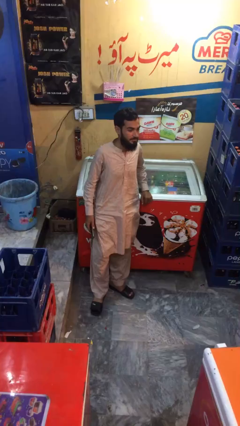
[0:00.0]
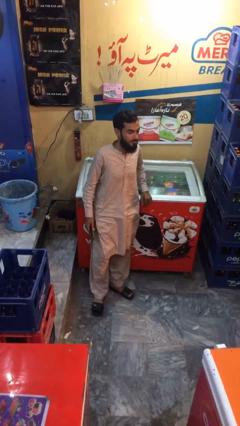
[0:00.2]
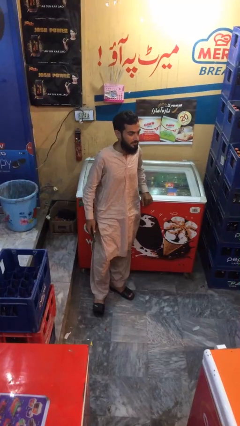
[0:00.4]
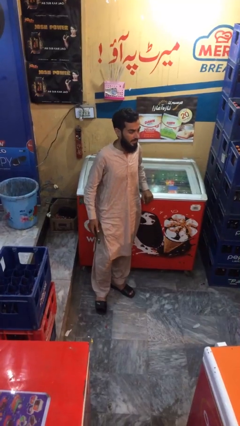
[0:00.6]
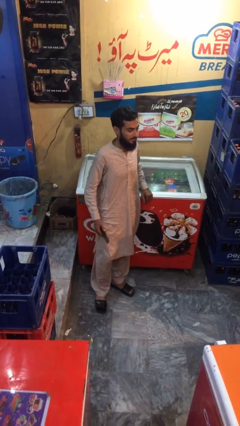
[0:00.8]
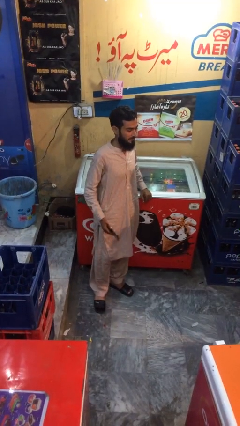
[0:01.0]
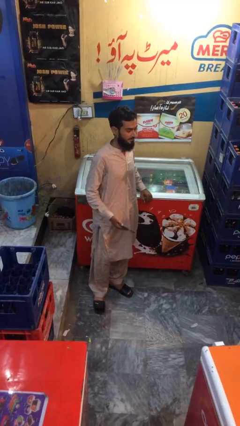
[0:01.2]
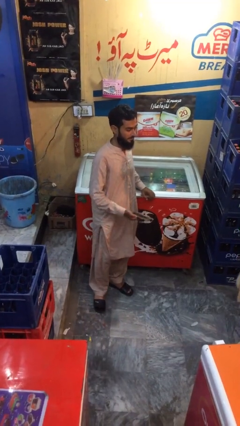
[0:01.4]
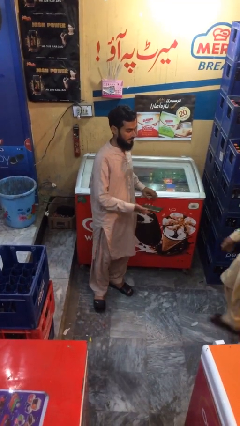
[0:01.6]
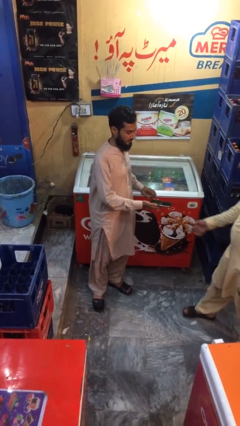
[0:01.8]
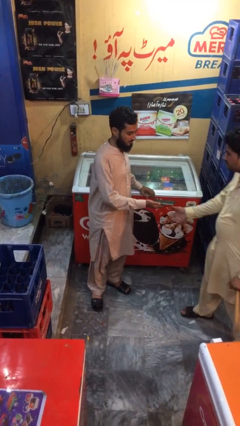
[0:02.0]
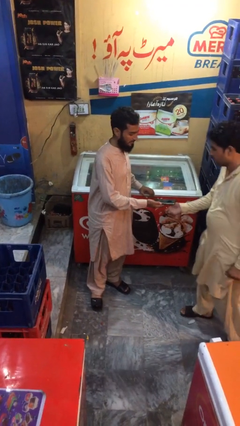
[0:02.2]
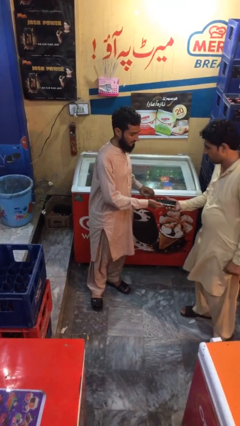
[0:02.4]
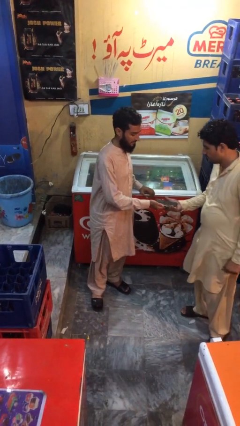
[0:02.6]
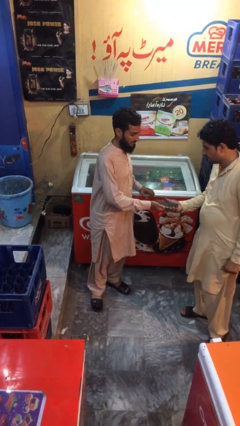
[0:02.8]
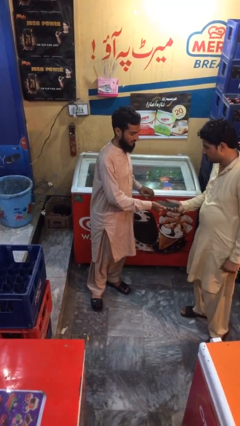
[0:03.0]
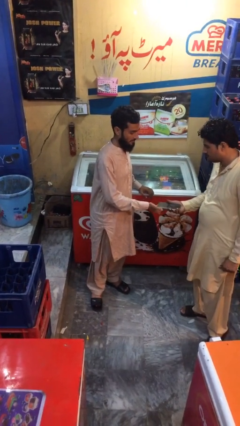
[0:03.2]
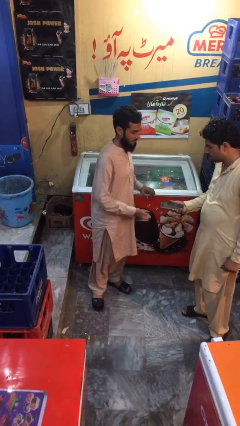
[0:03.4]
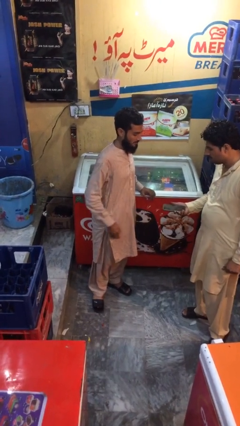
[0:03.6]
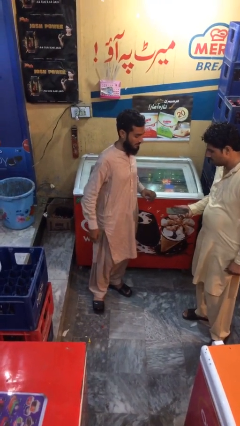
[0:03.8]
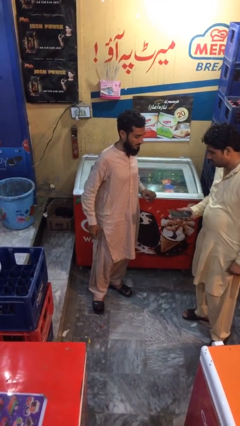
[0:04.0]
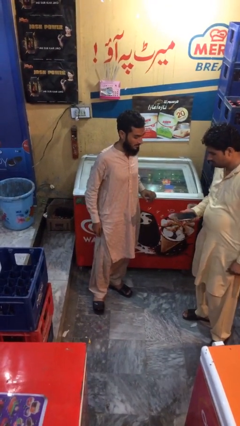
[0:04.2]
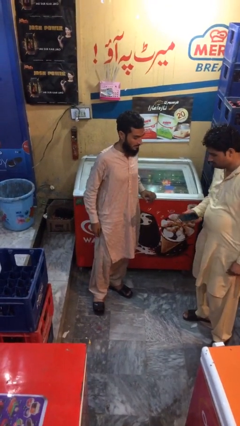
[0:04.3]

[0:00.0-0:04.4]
person transfers object to person

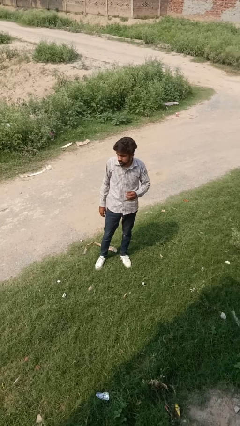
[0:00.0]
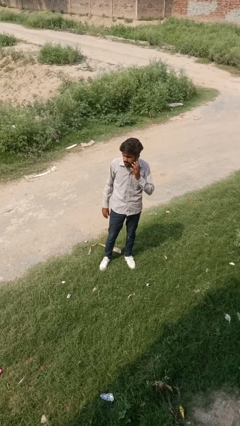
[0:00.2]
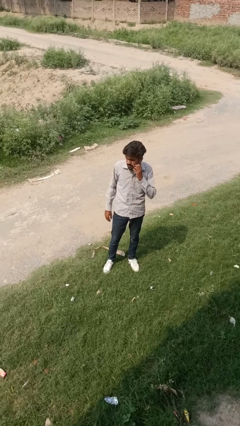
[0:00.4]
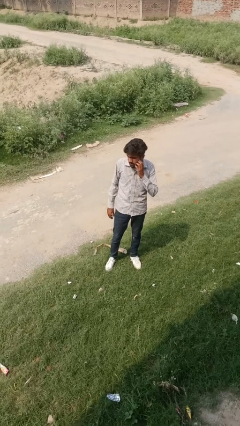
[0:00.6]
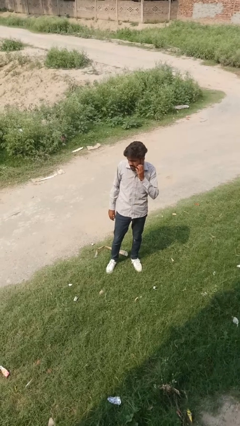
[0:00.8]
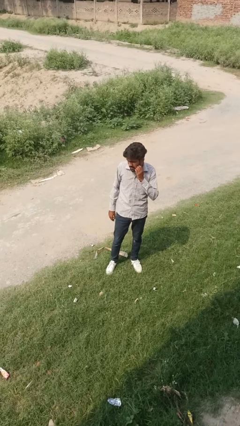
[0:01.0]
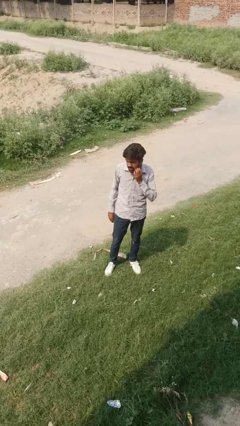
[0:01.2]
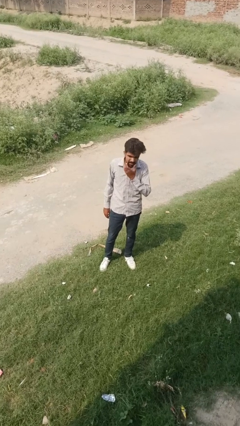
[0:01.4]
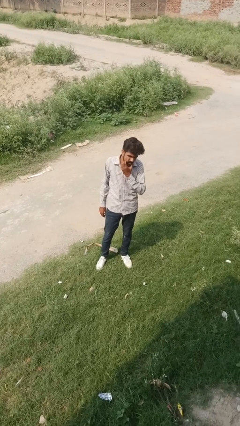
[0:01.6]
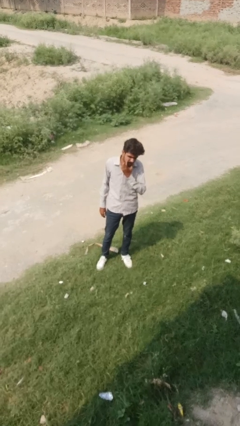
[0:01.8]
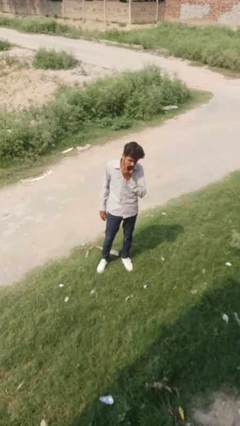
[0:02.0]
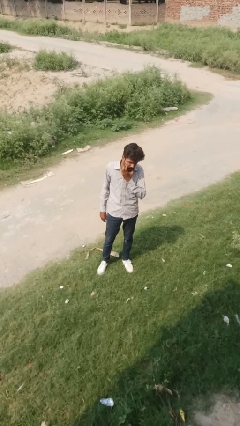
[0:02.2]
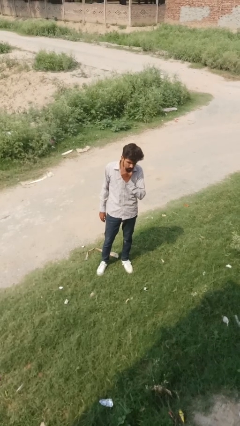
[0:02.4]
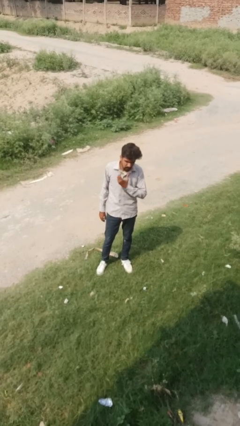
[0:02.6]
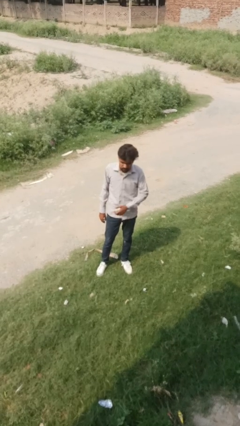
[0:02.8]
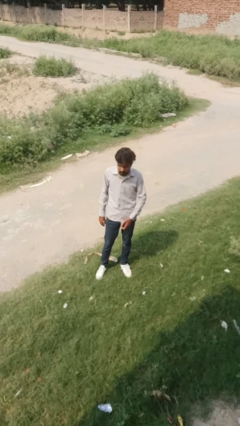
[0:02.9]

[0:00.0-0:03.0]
person scratches face

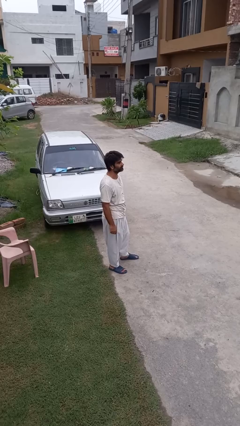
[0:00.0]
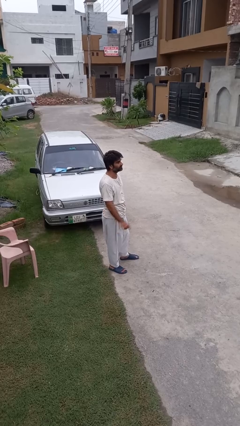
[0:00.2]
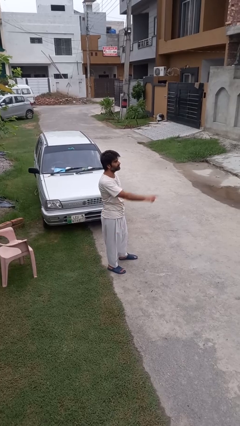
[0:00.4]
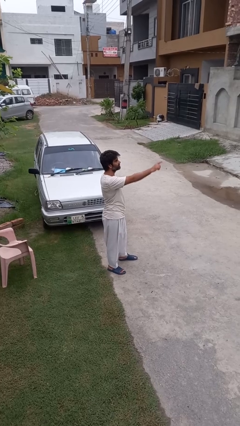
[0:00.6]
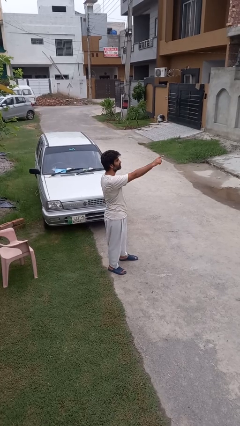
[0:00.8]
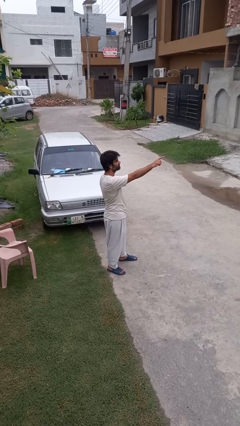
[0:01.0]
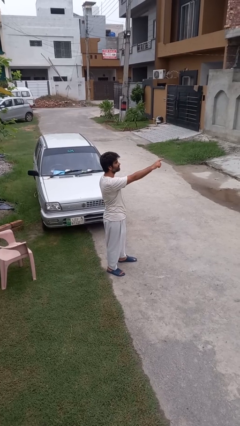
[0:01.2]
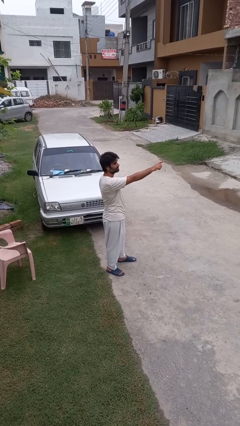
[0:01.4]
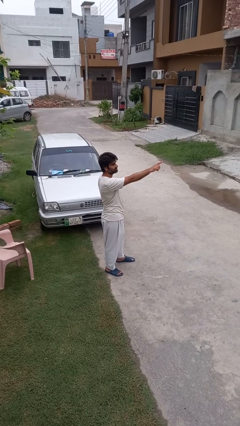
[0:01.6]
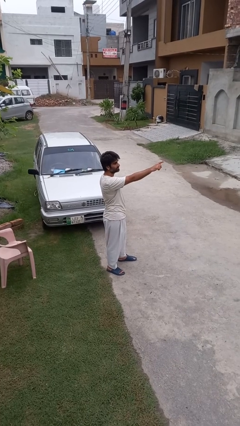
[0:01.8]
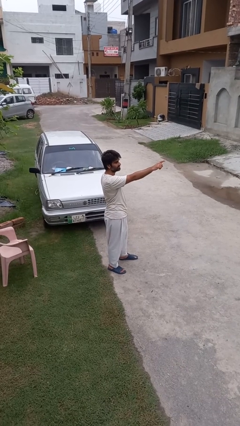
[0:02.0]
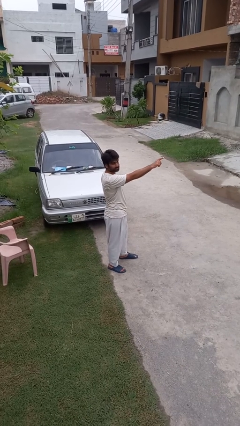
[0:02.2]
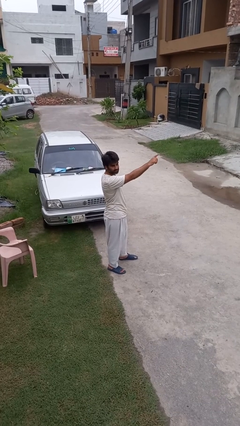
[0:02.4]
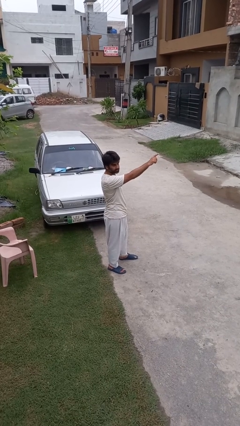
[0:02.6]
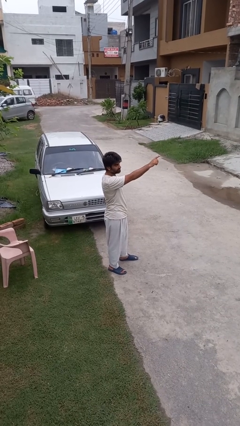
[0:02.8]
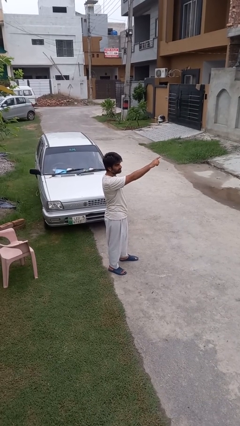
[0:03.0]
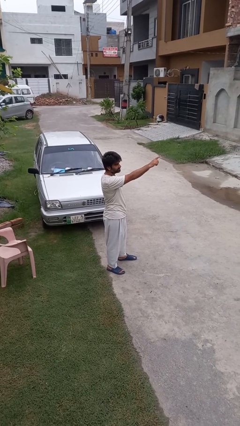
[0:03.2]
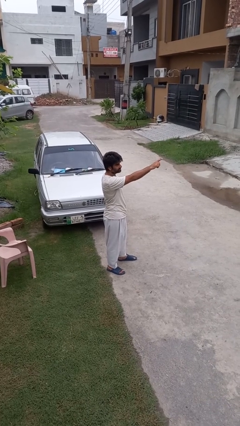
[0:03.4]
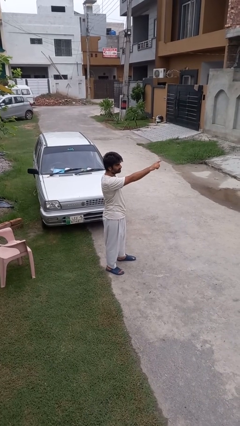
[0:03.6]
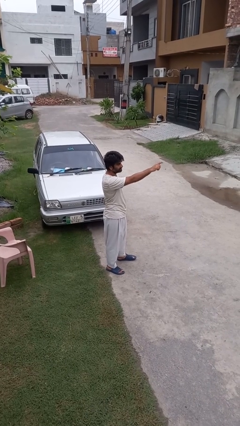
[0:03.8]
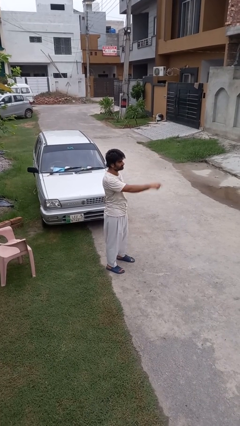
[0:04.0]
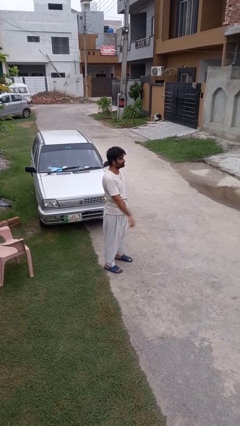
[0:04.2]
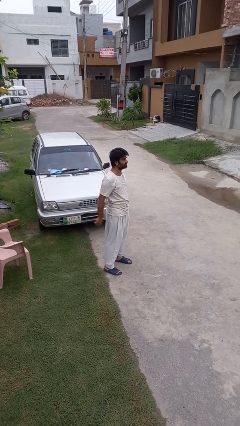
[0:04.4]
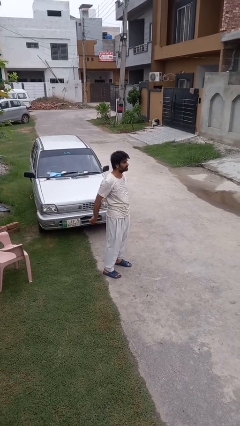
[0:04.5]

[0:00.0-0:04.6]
person points at person

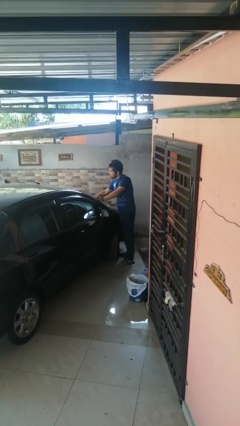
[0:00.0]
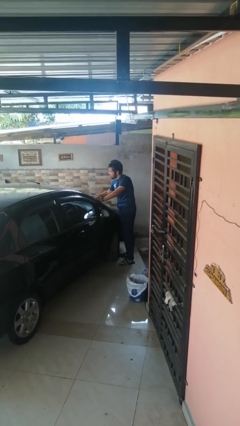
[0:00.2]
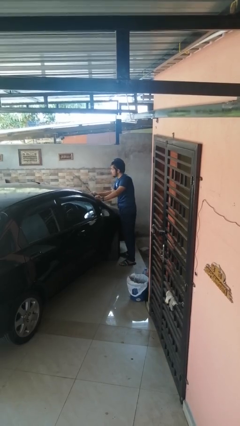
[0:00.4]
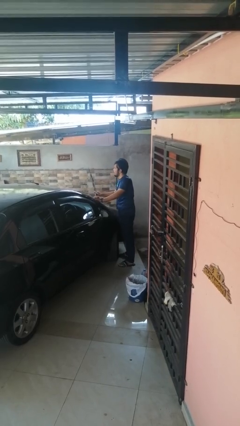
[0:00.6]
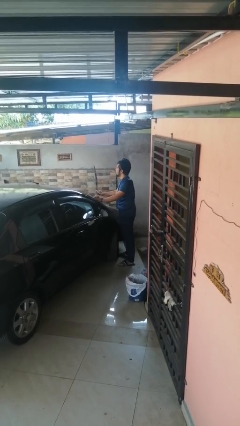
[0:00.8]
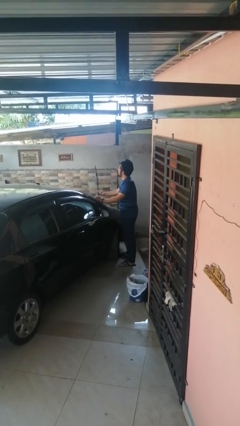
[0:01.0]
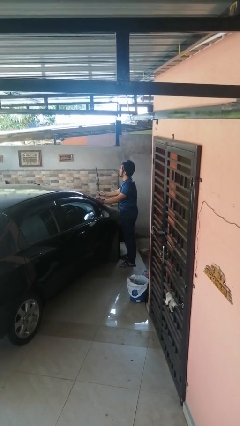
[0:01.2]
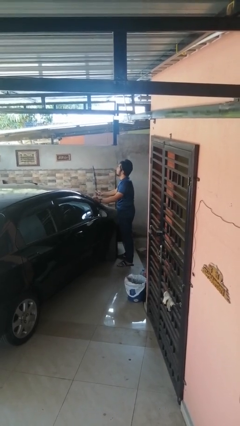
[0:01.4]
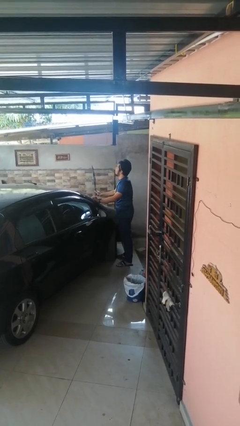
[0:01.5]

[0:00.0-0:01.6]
person flips up car wipers

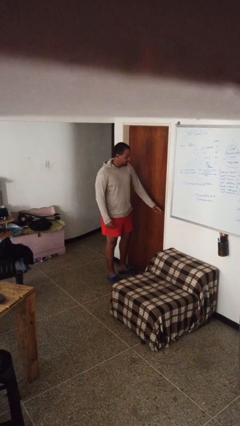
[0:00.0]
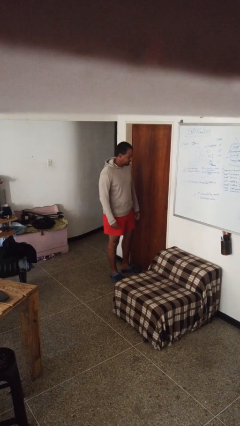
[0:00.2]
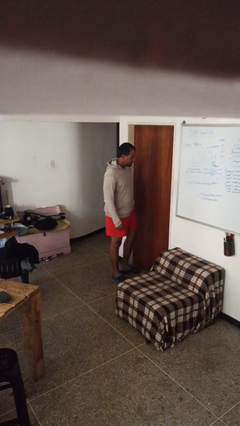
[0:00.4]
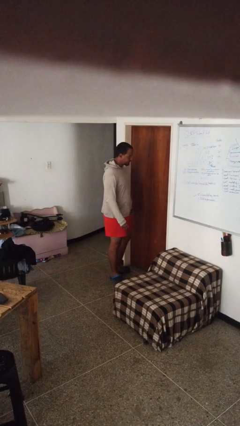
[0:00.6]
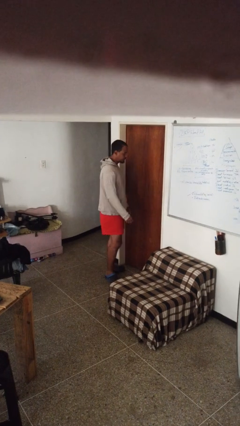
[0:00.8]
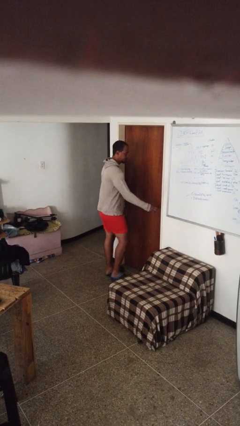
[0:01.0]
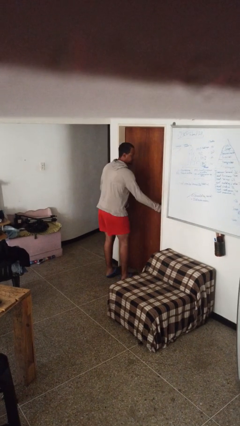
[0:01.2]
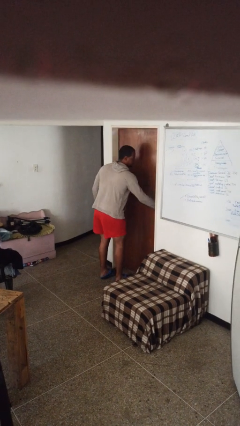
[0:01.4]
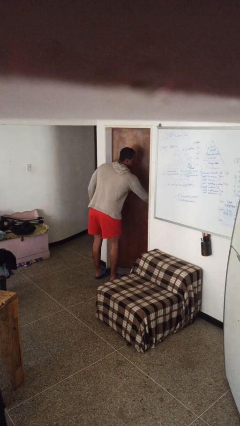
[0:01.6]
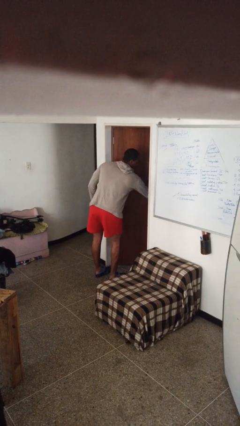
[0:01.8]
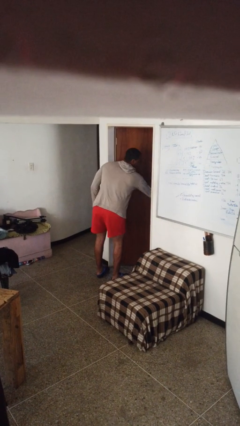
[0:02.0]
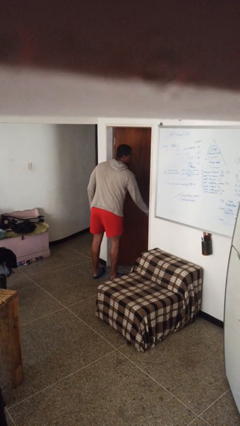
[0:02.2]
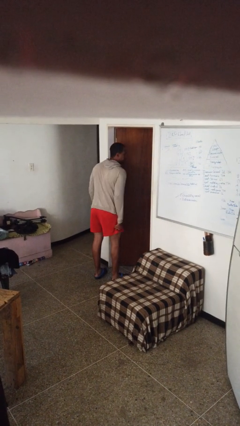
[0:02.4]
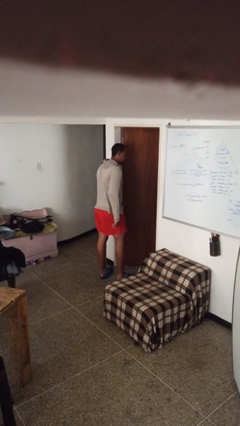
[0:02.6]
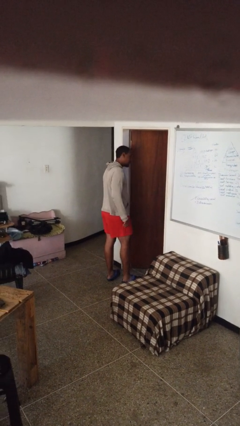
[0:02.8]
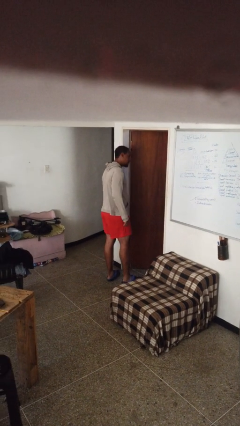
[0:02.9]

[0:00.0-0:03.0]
person opens facility door

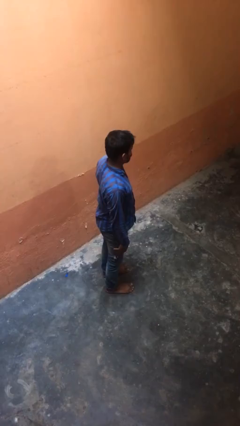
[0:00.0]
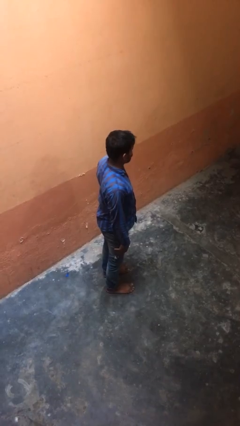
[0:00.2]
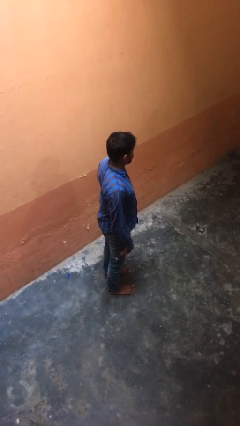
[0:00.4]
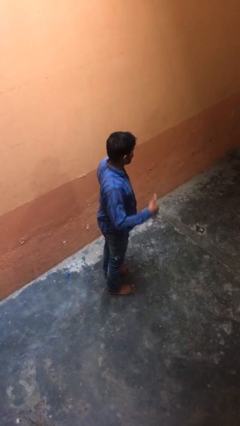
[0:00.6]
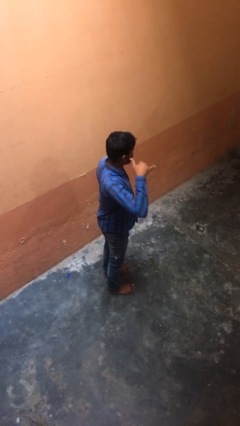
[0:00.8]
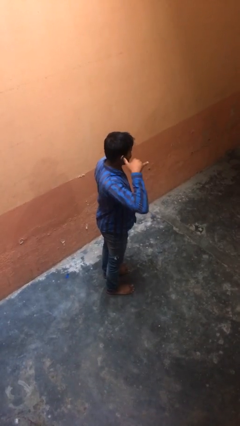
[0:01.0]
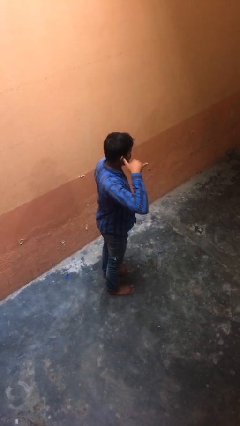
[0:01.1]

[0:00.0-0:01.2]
person gestures call me
